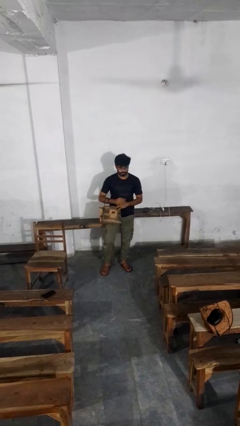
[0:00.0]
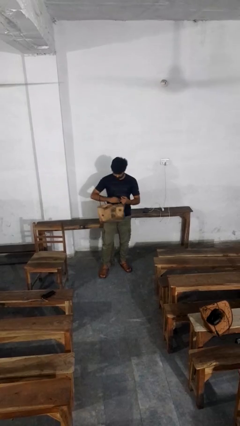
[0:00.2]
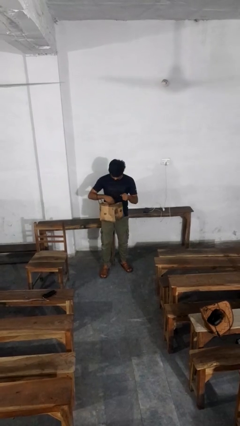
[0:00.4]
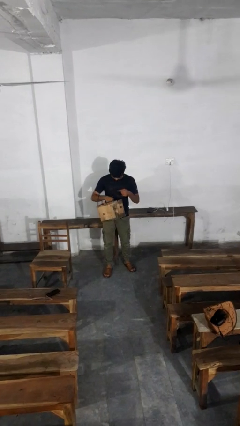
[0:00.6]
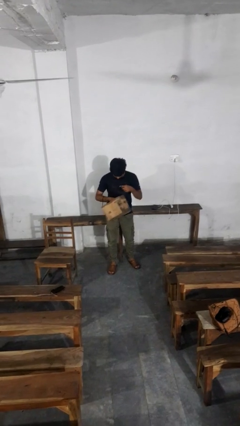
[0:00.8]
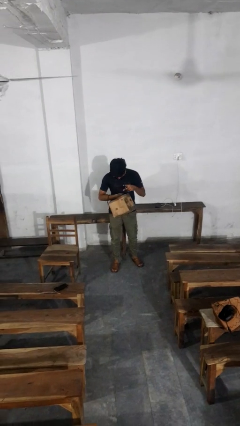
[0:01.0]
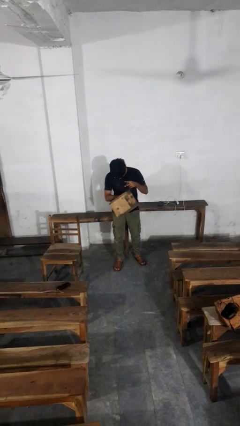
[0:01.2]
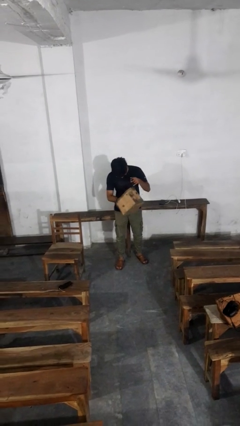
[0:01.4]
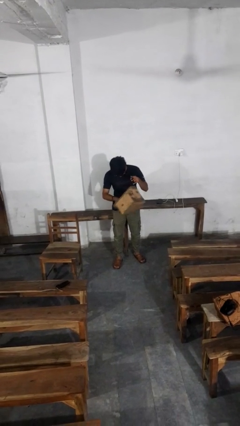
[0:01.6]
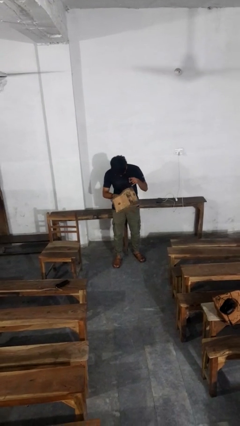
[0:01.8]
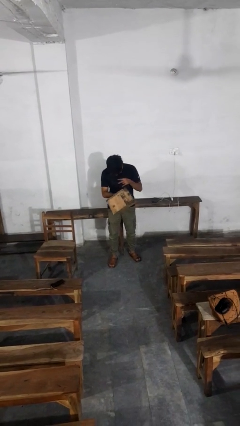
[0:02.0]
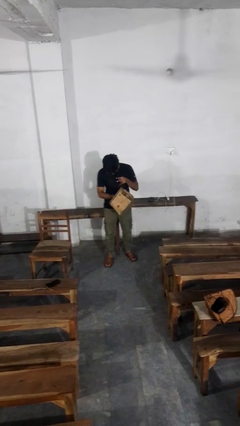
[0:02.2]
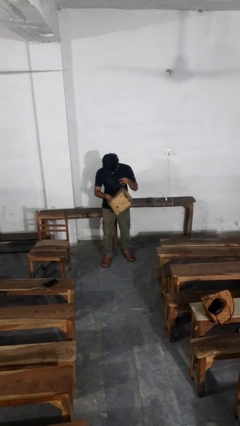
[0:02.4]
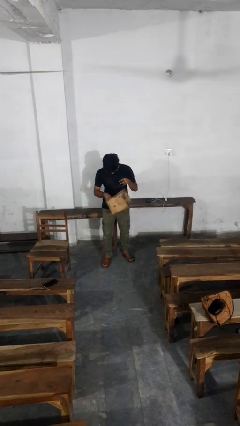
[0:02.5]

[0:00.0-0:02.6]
person searches in purse

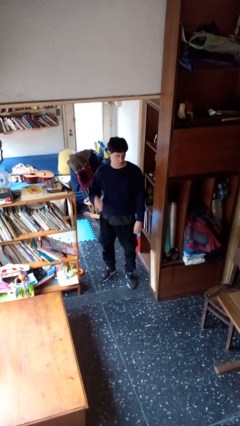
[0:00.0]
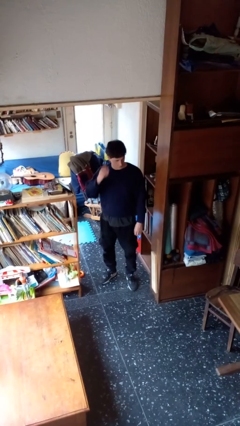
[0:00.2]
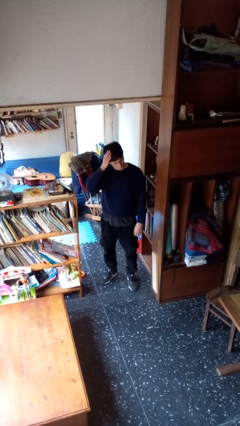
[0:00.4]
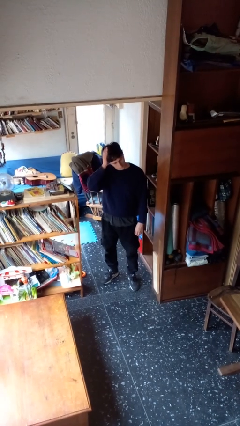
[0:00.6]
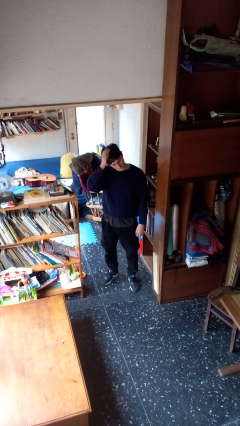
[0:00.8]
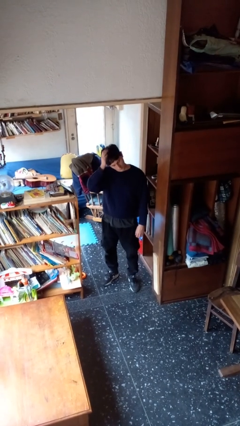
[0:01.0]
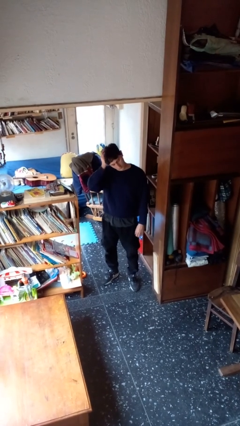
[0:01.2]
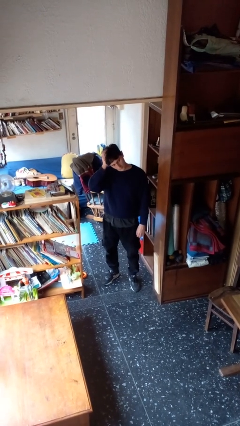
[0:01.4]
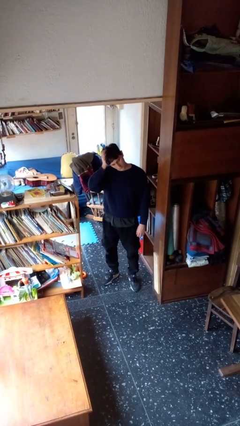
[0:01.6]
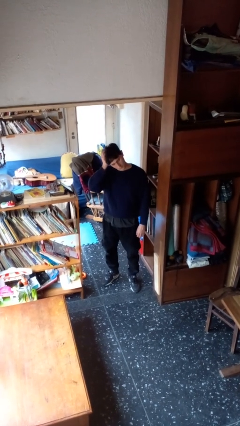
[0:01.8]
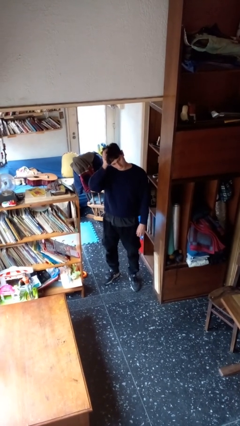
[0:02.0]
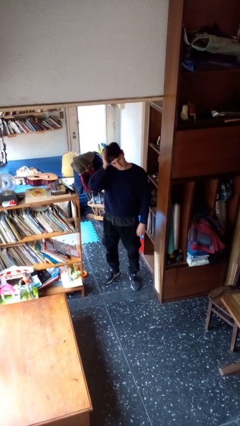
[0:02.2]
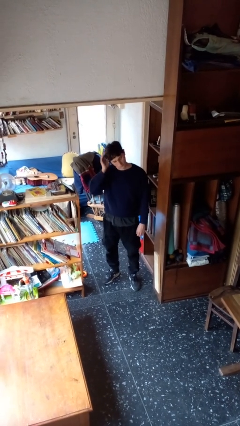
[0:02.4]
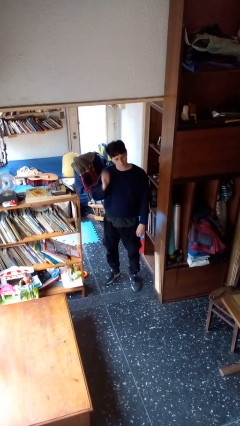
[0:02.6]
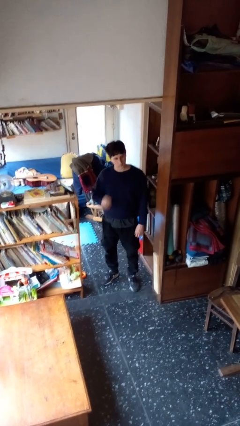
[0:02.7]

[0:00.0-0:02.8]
person pats head

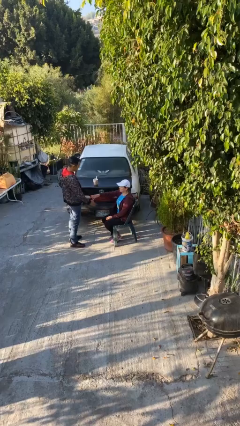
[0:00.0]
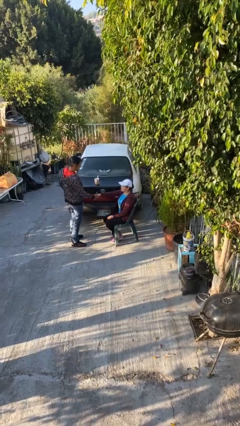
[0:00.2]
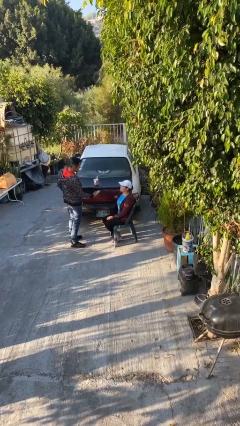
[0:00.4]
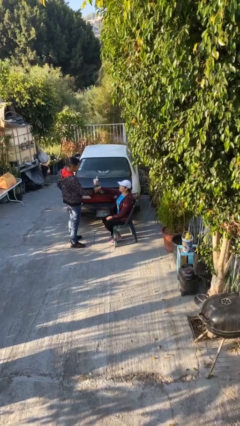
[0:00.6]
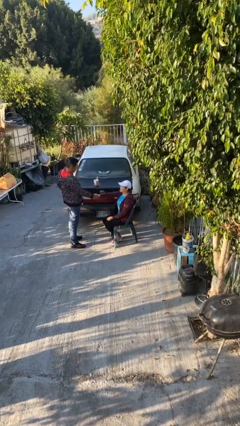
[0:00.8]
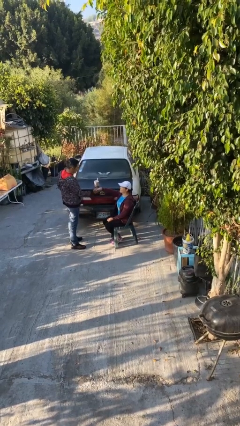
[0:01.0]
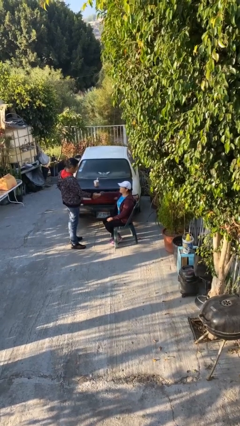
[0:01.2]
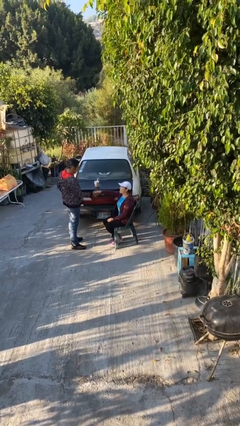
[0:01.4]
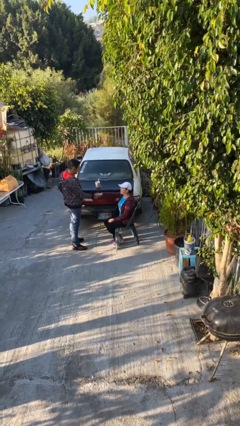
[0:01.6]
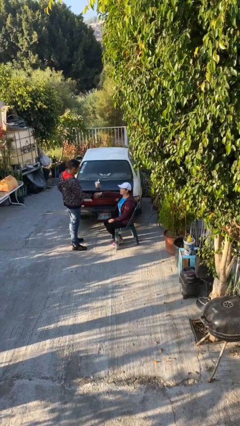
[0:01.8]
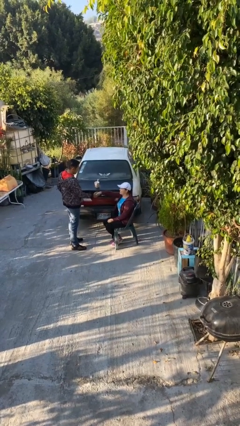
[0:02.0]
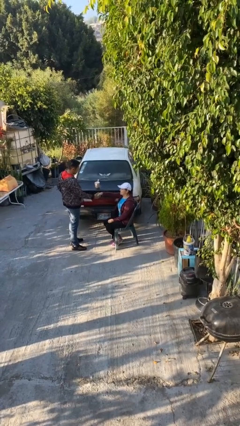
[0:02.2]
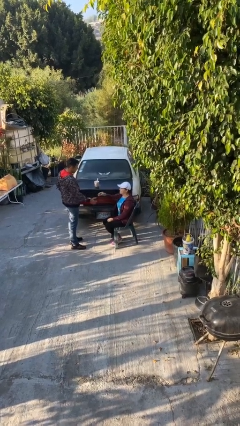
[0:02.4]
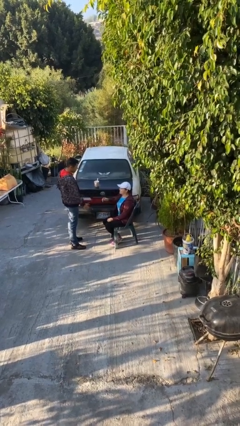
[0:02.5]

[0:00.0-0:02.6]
person shakes hand

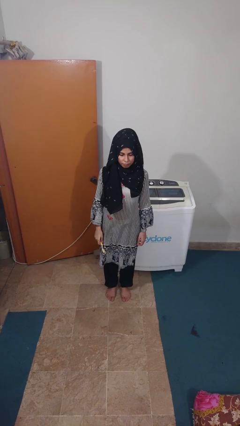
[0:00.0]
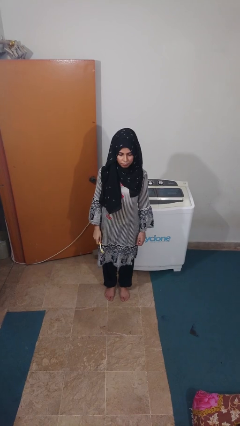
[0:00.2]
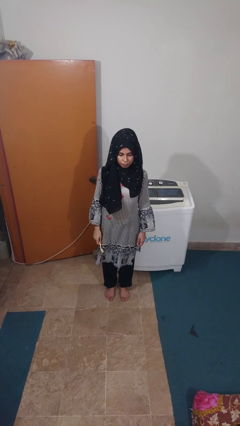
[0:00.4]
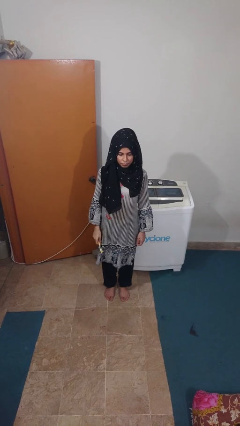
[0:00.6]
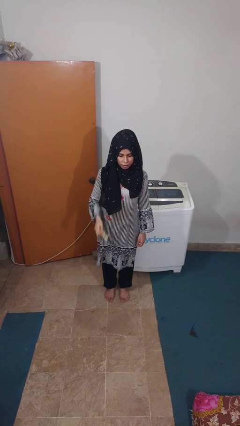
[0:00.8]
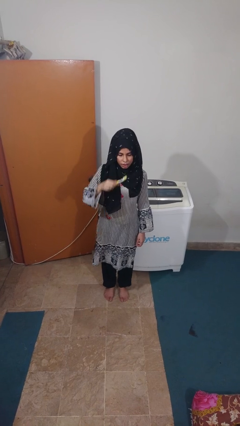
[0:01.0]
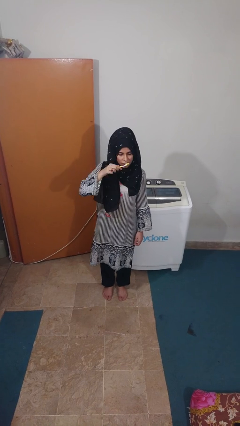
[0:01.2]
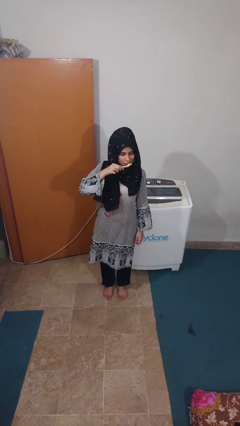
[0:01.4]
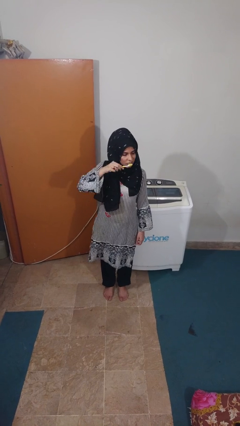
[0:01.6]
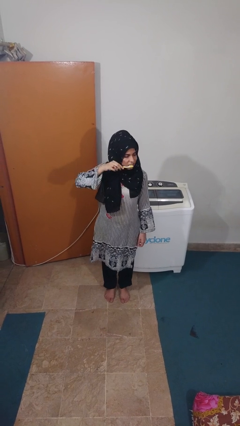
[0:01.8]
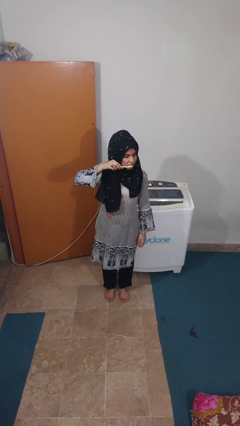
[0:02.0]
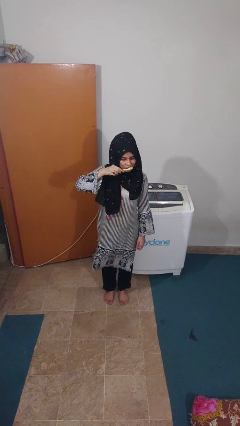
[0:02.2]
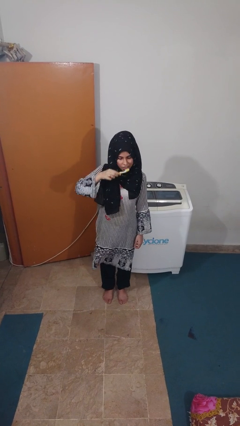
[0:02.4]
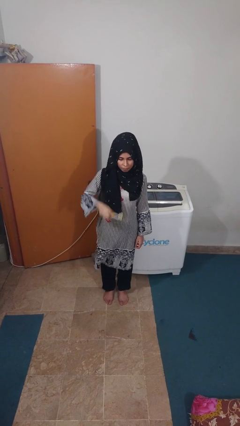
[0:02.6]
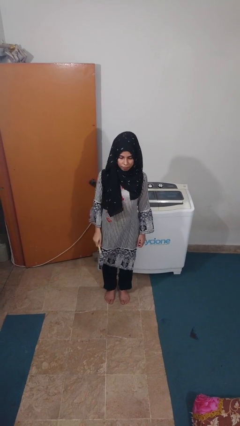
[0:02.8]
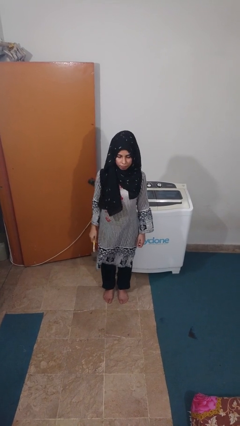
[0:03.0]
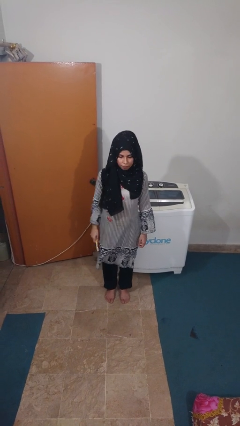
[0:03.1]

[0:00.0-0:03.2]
person brushes teeth

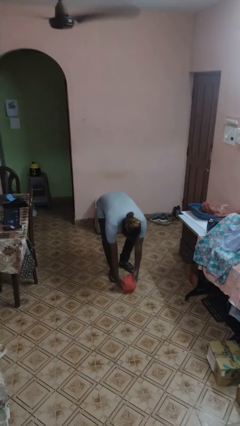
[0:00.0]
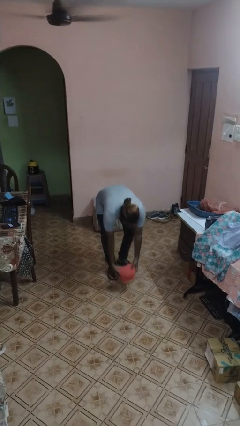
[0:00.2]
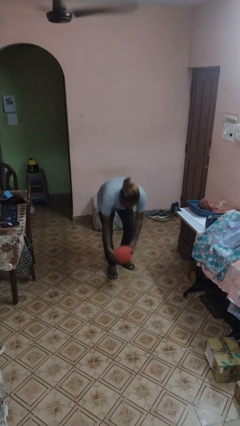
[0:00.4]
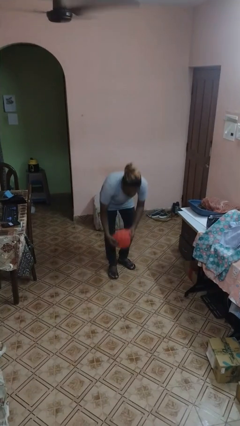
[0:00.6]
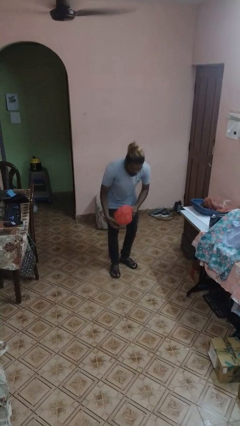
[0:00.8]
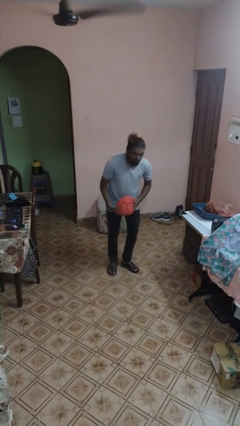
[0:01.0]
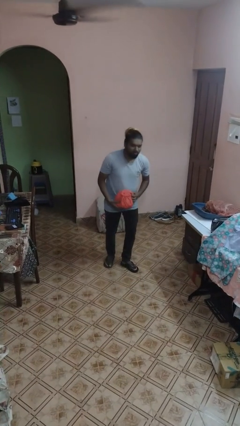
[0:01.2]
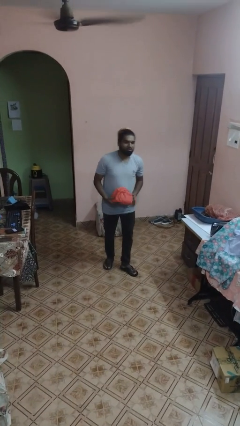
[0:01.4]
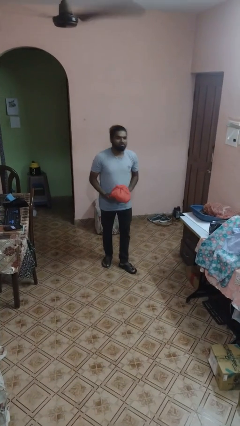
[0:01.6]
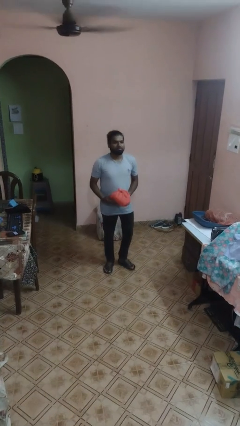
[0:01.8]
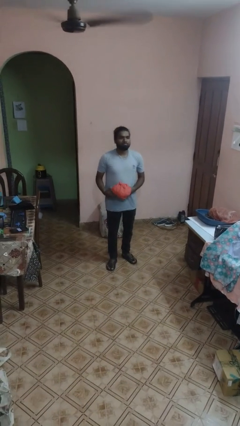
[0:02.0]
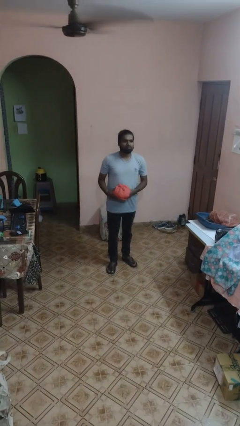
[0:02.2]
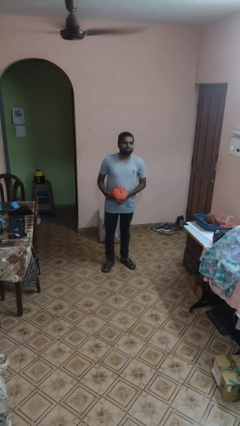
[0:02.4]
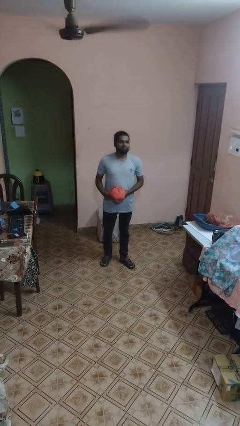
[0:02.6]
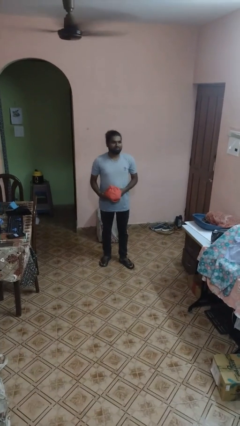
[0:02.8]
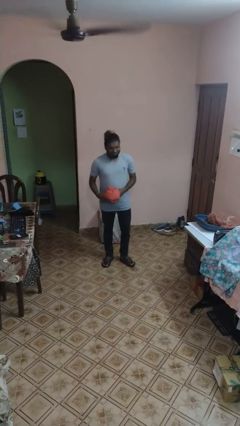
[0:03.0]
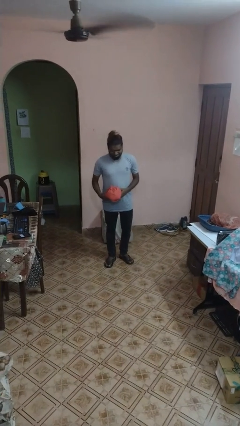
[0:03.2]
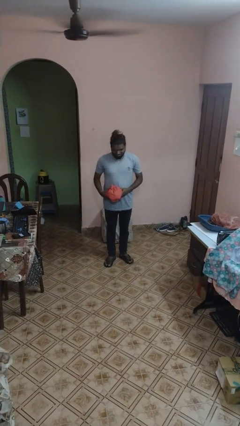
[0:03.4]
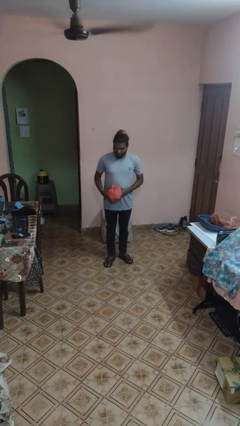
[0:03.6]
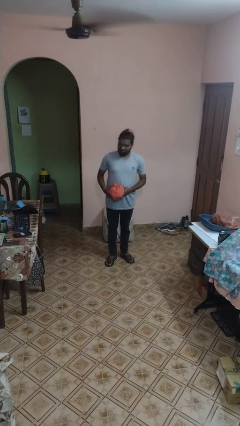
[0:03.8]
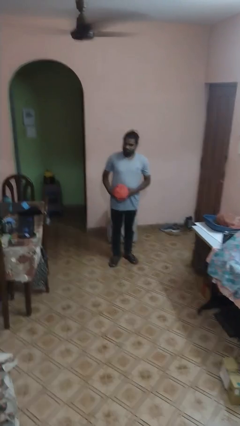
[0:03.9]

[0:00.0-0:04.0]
person picks up object from floor

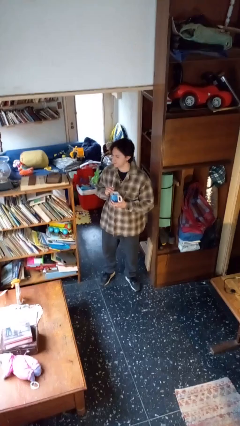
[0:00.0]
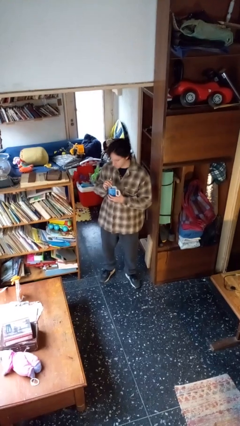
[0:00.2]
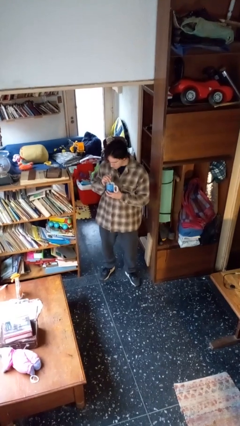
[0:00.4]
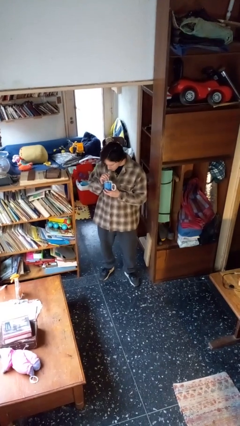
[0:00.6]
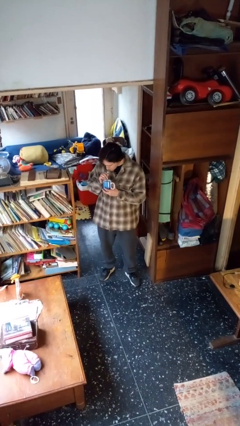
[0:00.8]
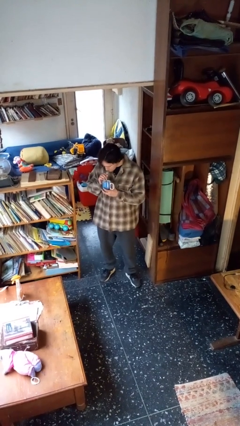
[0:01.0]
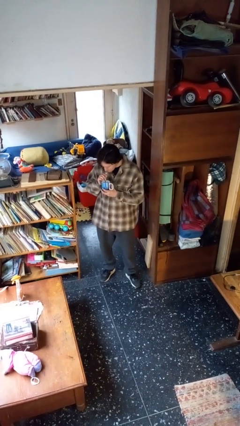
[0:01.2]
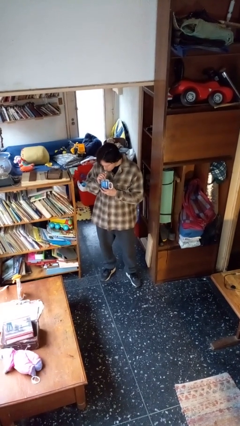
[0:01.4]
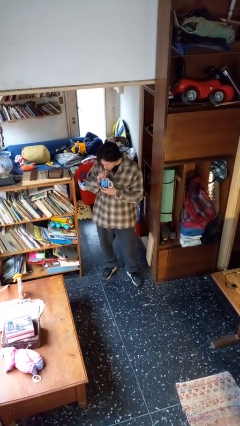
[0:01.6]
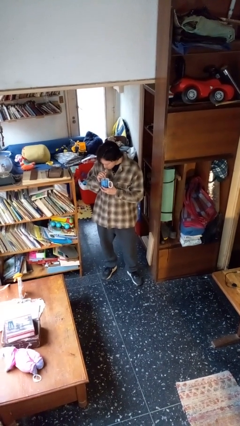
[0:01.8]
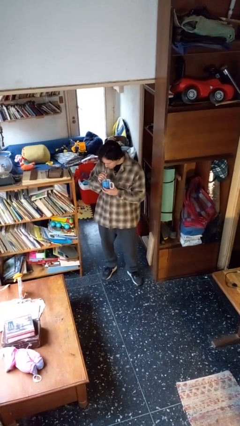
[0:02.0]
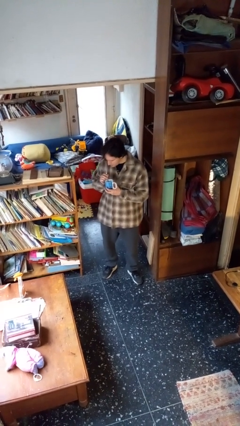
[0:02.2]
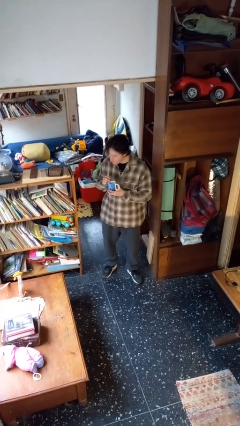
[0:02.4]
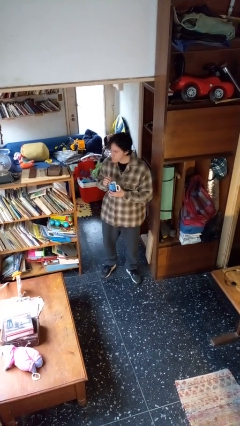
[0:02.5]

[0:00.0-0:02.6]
person drinks from straw
